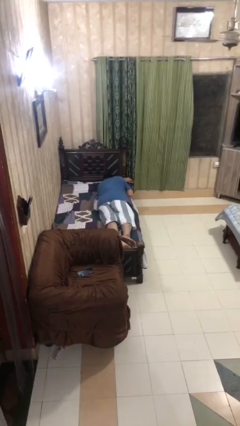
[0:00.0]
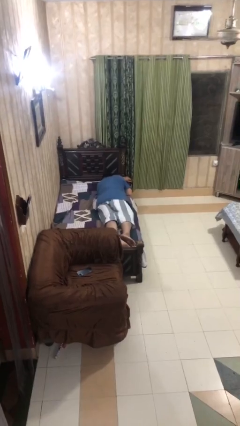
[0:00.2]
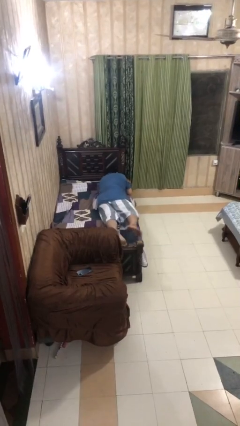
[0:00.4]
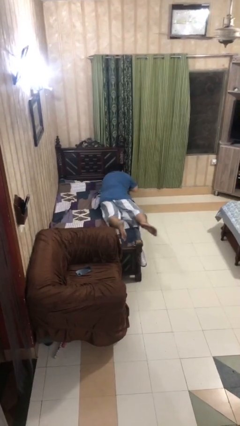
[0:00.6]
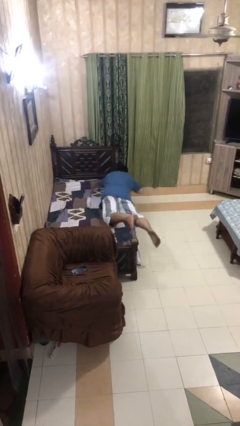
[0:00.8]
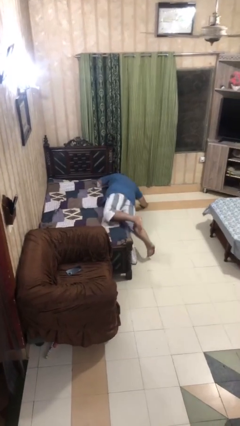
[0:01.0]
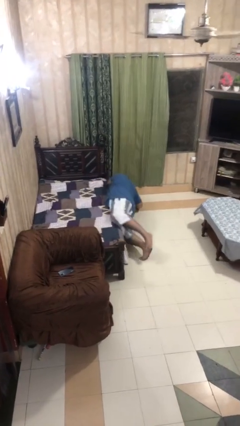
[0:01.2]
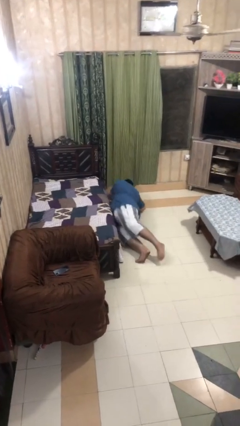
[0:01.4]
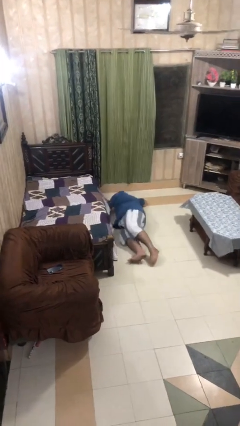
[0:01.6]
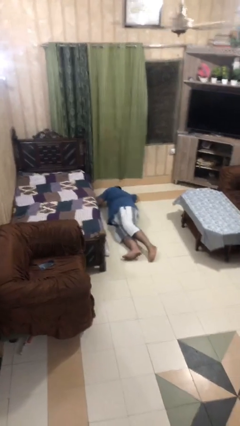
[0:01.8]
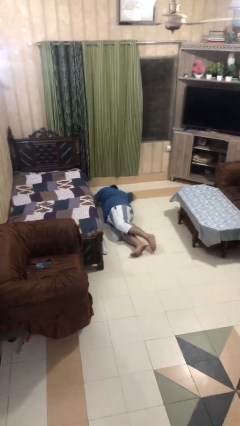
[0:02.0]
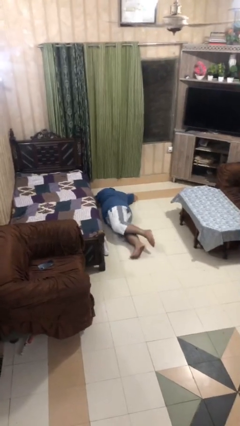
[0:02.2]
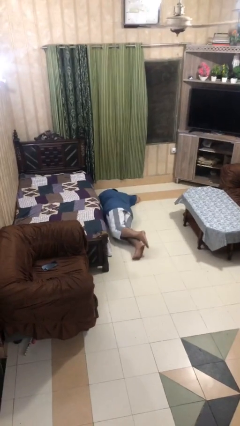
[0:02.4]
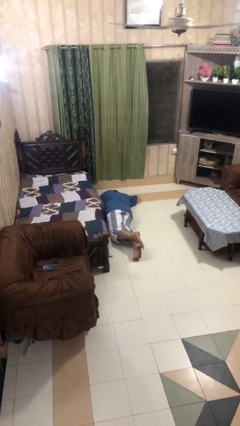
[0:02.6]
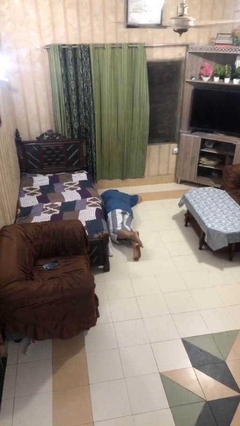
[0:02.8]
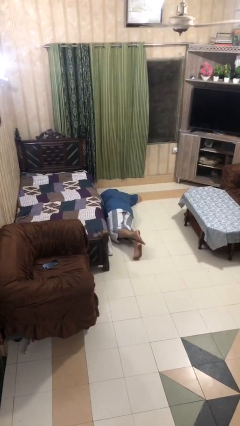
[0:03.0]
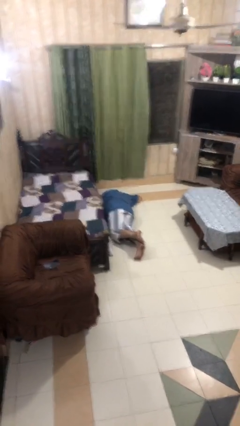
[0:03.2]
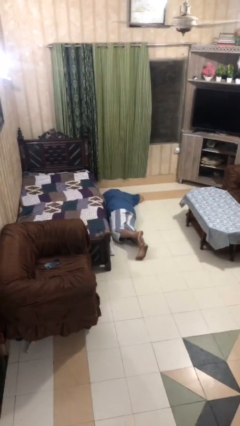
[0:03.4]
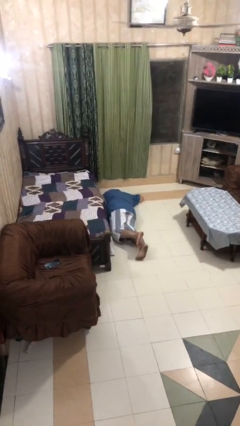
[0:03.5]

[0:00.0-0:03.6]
person falls from bed

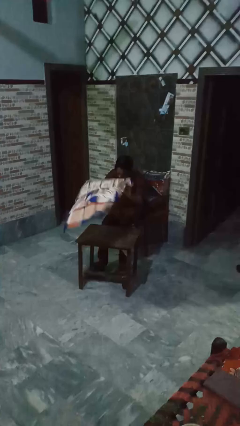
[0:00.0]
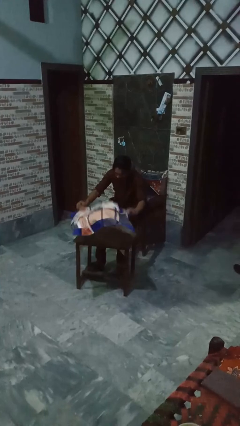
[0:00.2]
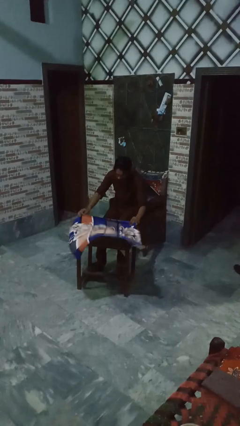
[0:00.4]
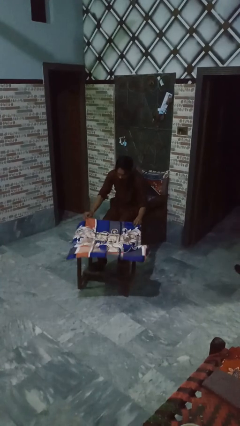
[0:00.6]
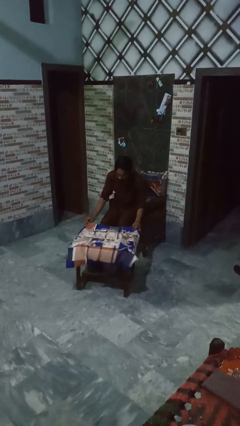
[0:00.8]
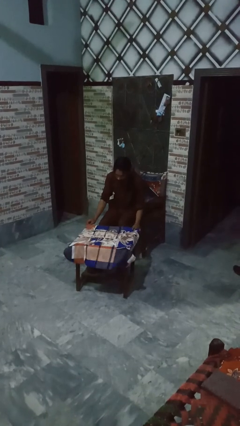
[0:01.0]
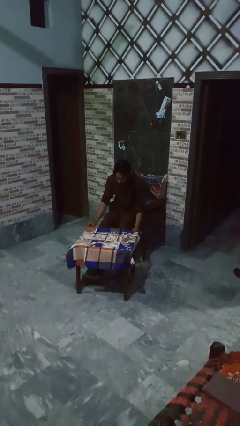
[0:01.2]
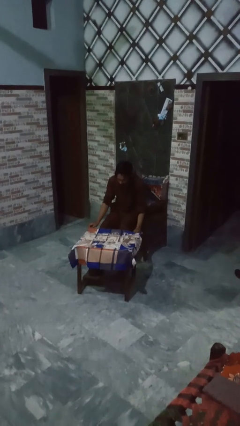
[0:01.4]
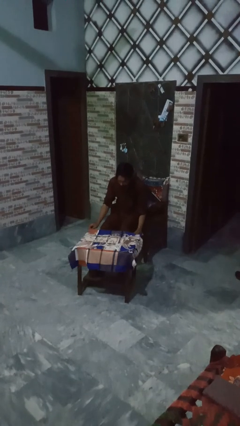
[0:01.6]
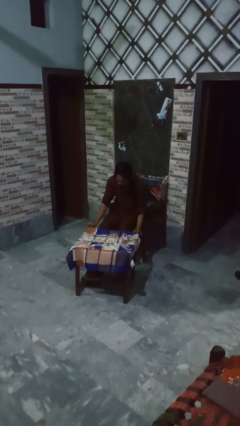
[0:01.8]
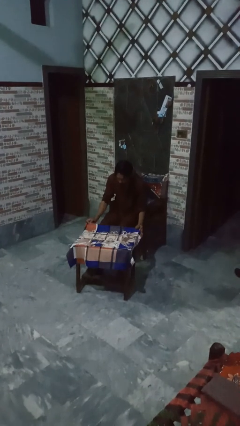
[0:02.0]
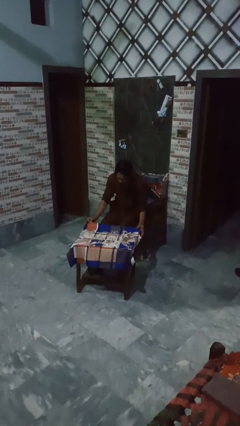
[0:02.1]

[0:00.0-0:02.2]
person spreads tablecloth

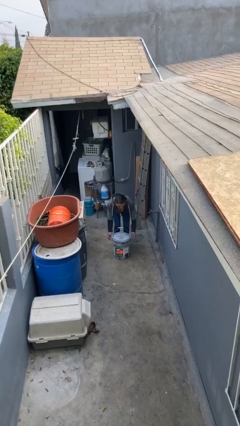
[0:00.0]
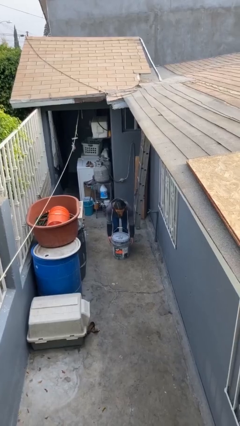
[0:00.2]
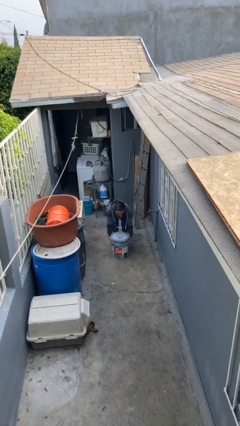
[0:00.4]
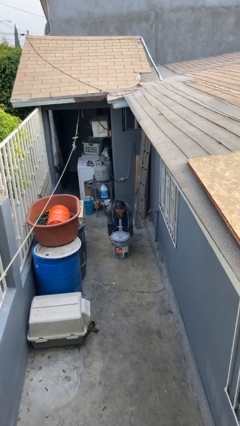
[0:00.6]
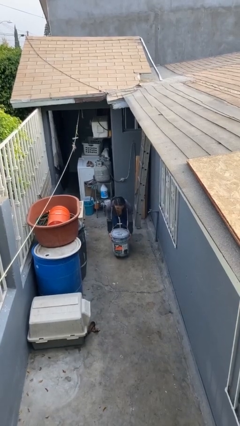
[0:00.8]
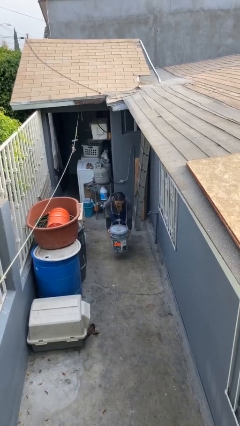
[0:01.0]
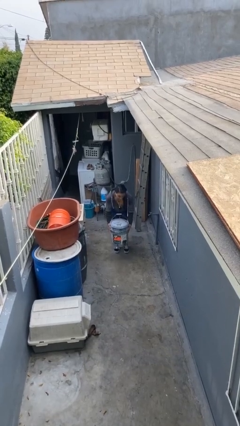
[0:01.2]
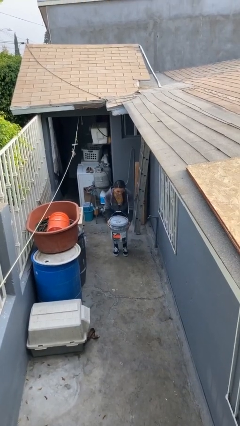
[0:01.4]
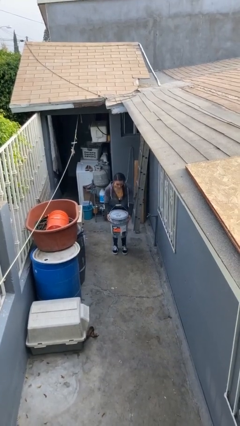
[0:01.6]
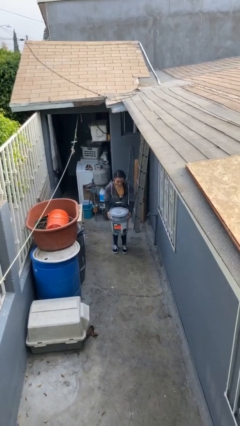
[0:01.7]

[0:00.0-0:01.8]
person picks up object from floor

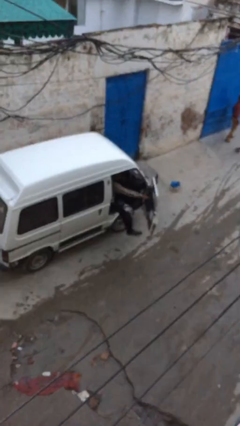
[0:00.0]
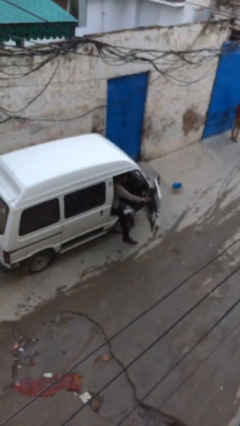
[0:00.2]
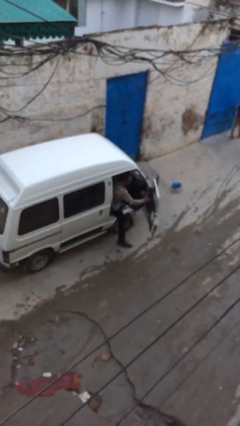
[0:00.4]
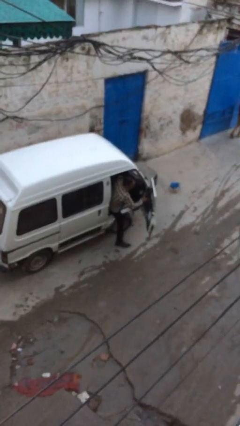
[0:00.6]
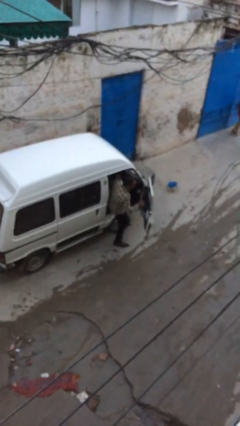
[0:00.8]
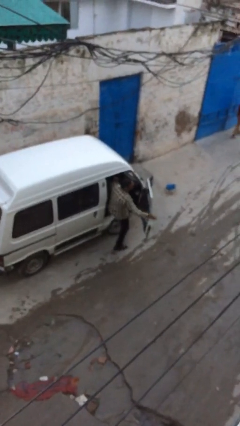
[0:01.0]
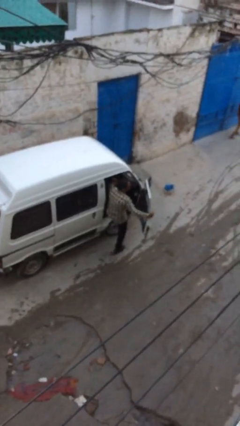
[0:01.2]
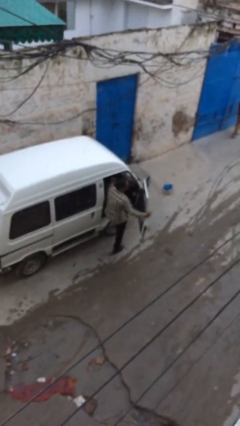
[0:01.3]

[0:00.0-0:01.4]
person exits car

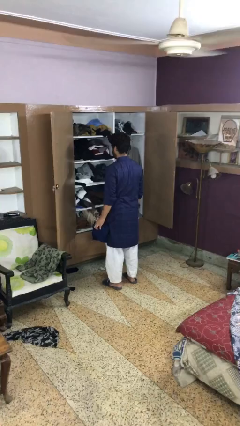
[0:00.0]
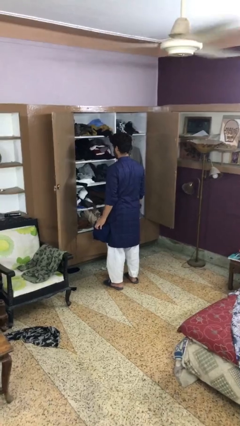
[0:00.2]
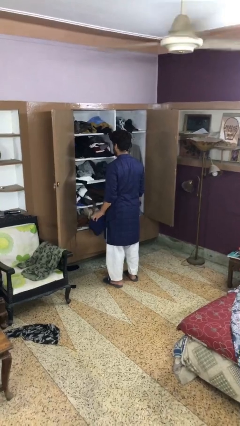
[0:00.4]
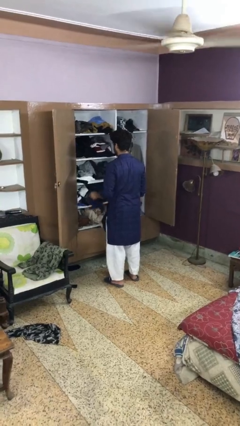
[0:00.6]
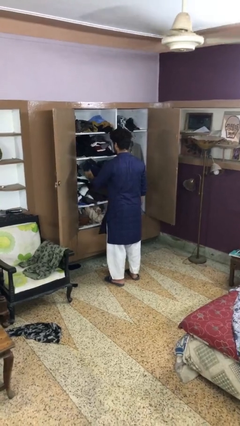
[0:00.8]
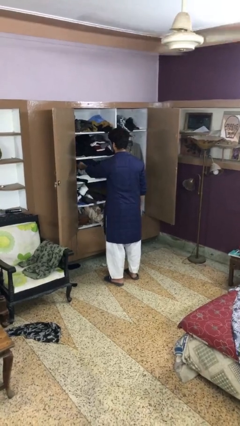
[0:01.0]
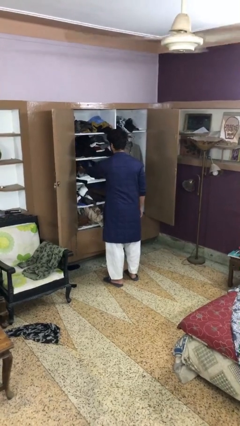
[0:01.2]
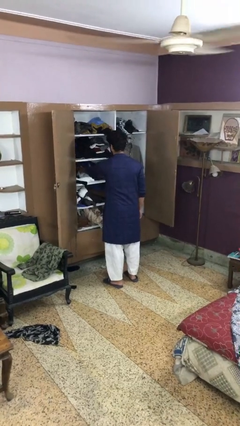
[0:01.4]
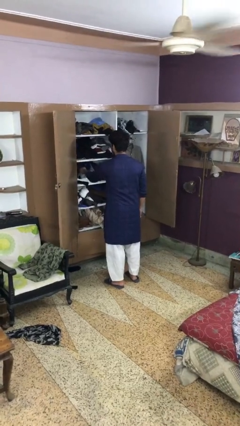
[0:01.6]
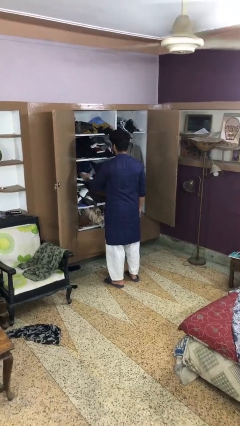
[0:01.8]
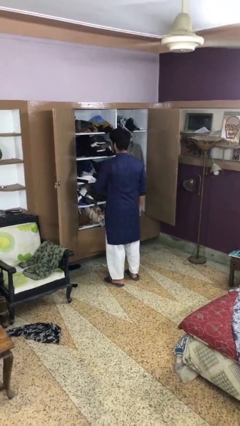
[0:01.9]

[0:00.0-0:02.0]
person puts clothes into dresser

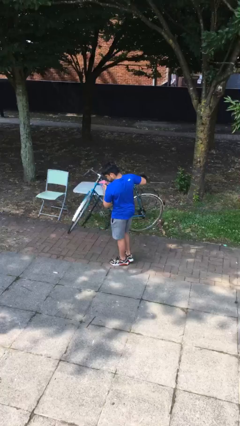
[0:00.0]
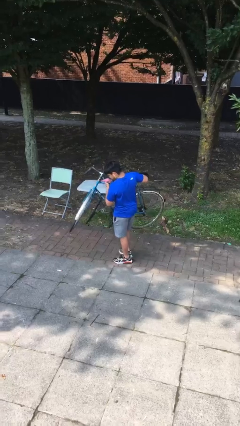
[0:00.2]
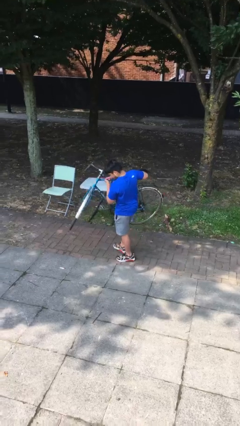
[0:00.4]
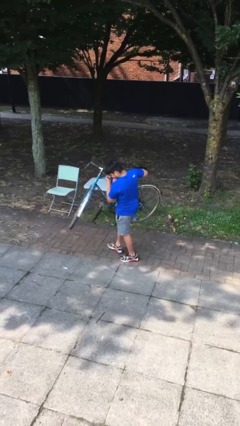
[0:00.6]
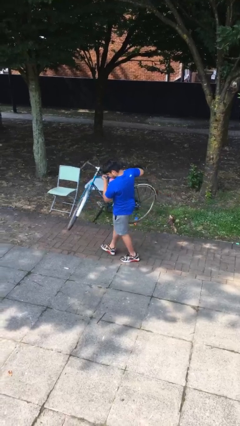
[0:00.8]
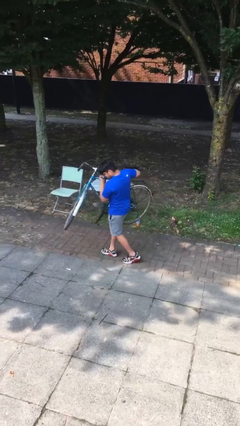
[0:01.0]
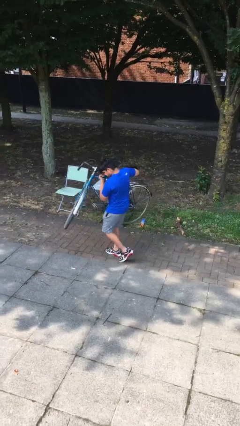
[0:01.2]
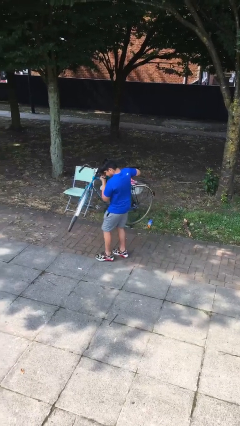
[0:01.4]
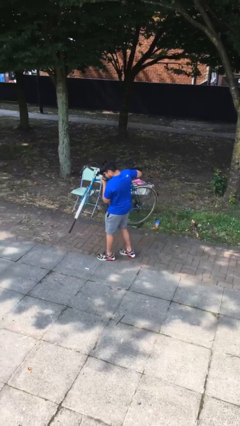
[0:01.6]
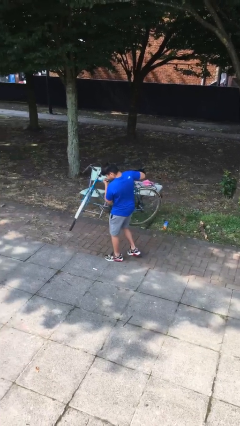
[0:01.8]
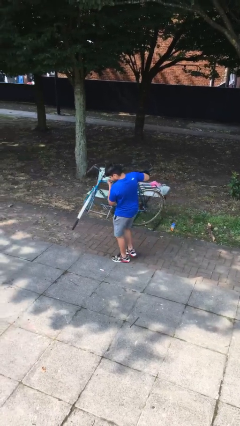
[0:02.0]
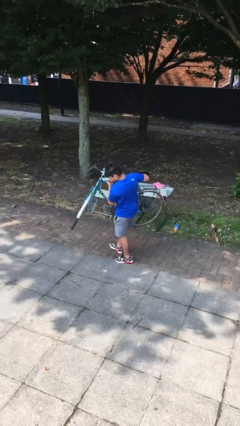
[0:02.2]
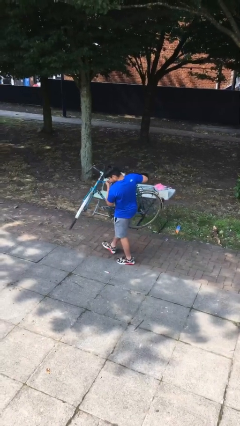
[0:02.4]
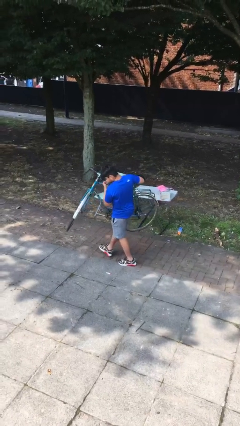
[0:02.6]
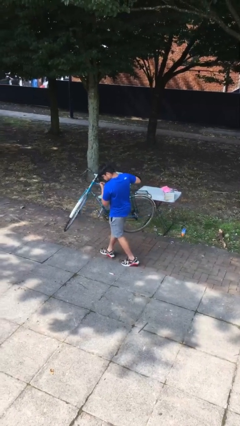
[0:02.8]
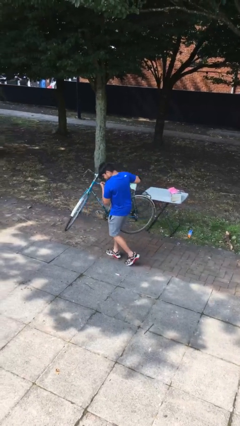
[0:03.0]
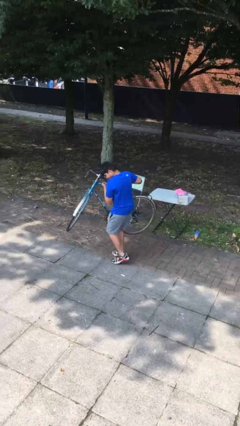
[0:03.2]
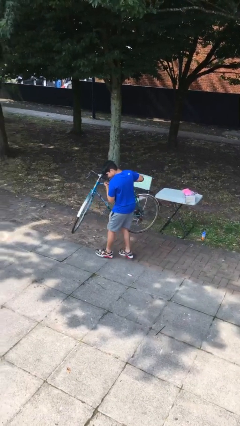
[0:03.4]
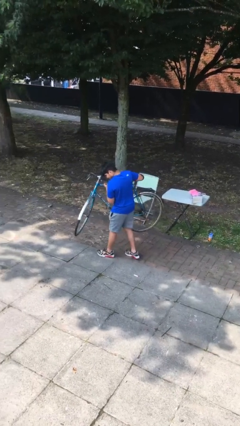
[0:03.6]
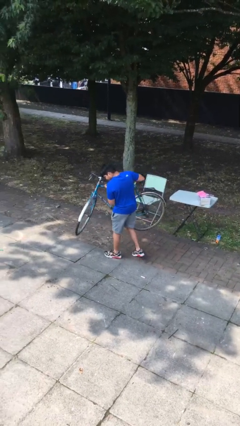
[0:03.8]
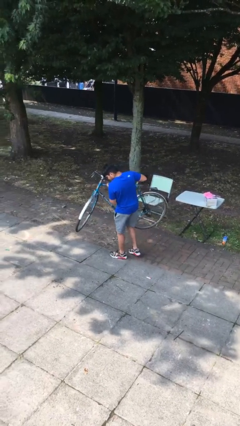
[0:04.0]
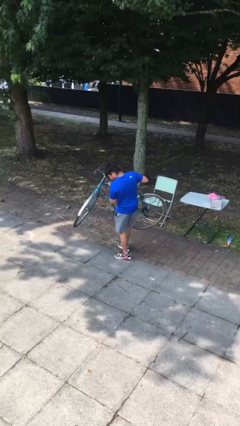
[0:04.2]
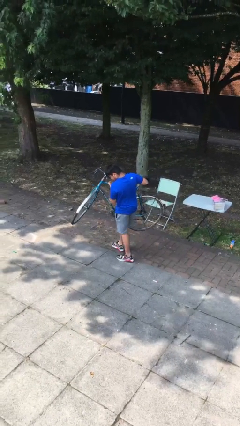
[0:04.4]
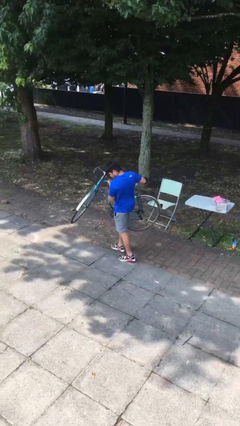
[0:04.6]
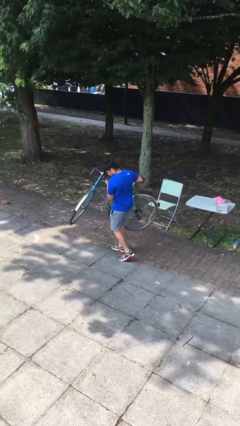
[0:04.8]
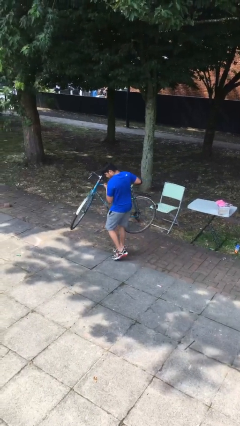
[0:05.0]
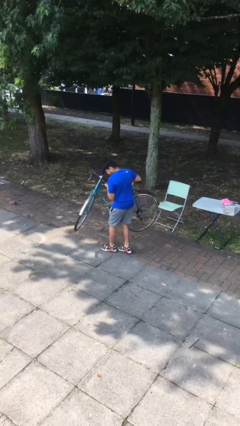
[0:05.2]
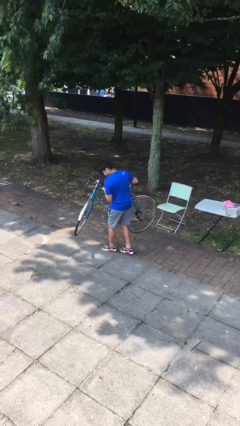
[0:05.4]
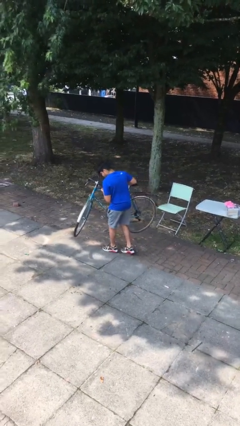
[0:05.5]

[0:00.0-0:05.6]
person carries heavy object

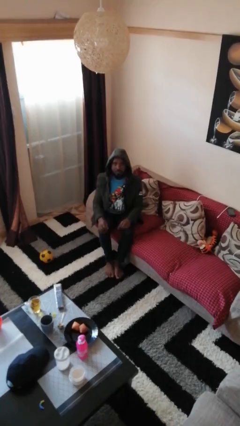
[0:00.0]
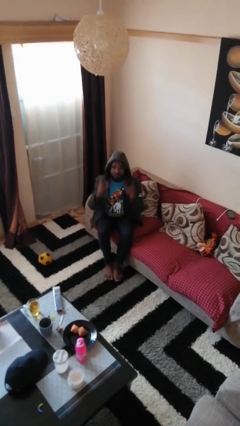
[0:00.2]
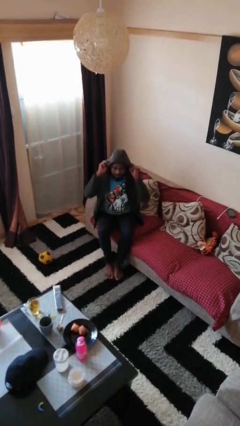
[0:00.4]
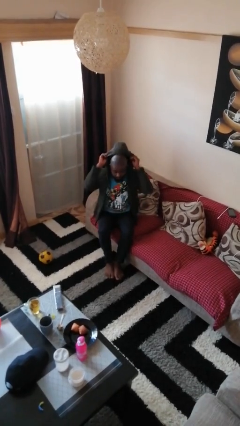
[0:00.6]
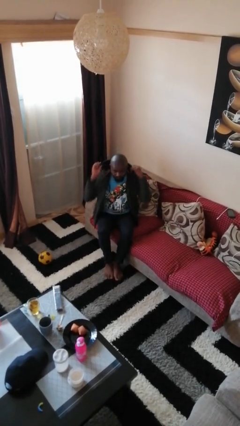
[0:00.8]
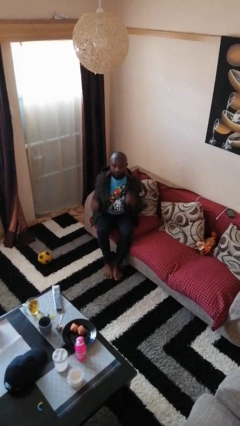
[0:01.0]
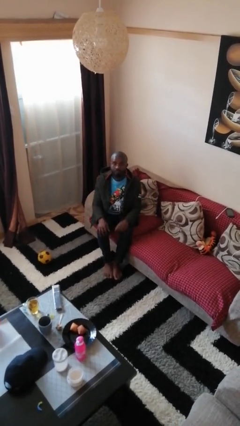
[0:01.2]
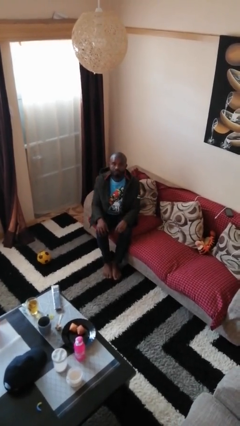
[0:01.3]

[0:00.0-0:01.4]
person takes off hoodie
